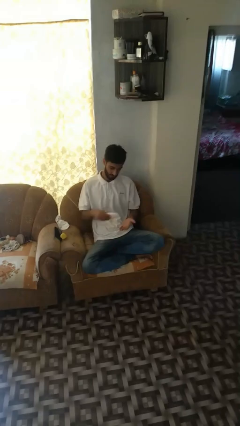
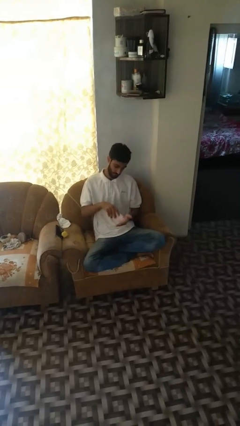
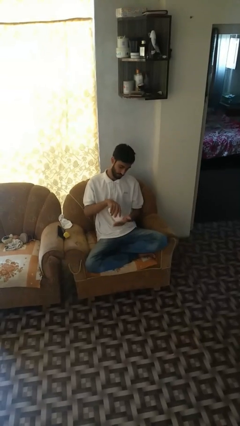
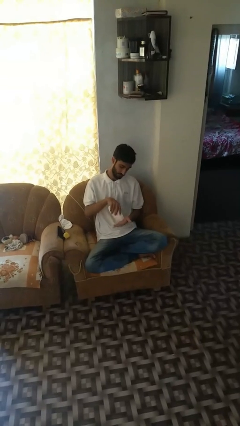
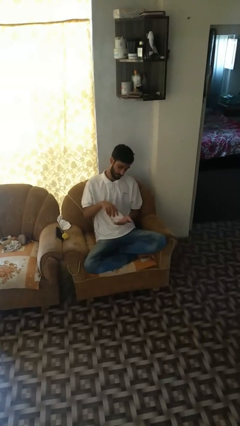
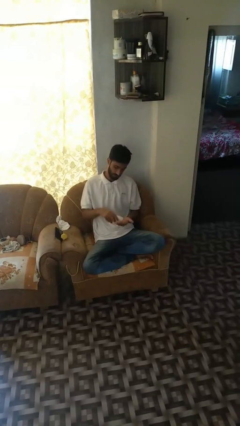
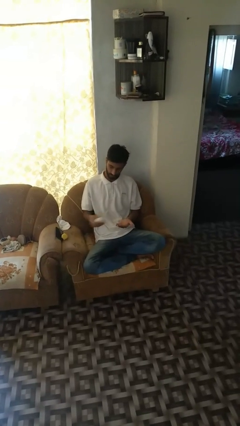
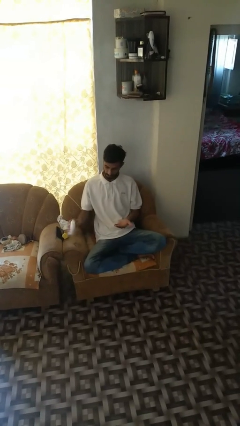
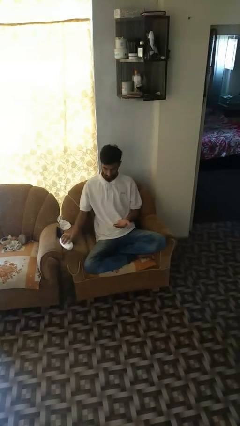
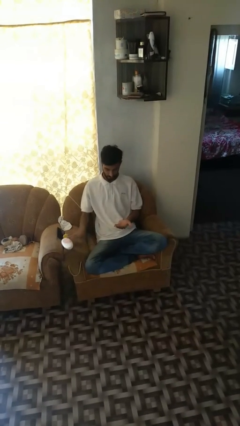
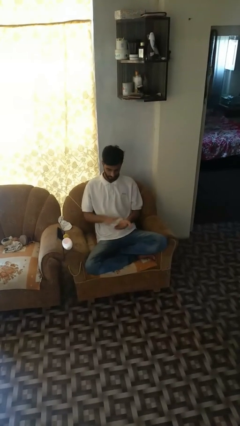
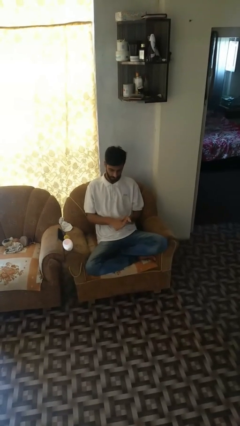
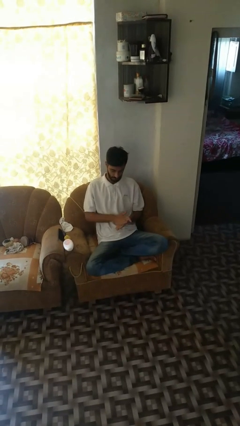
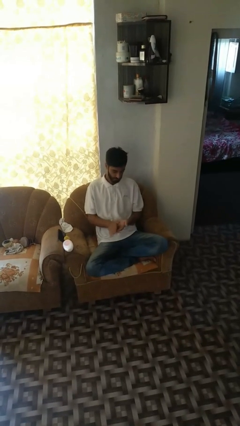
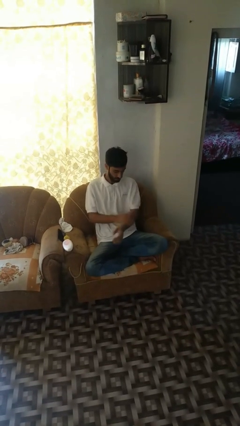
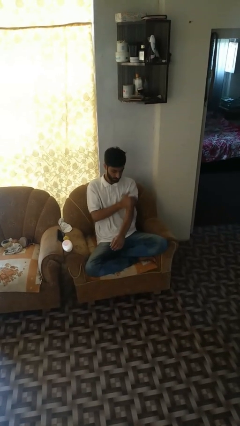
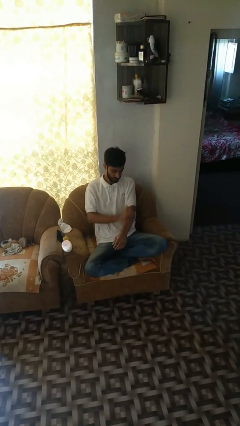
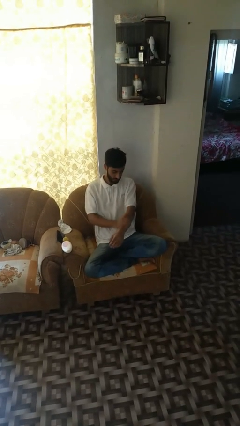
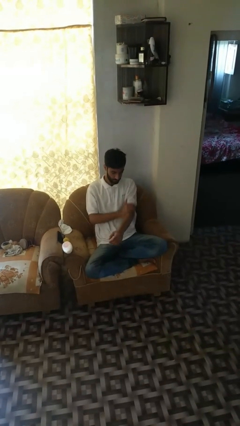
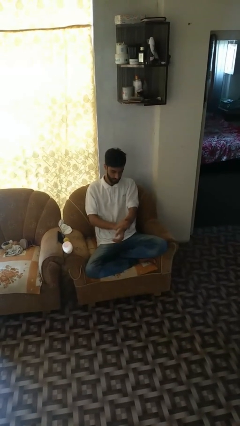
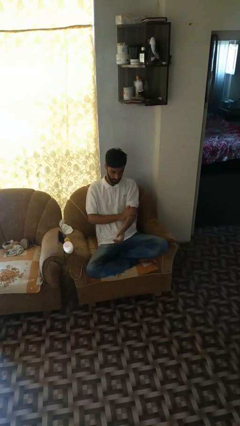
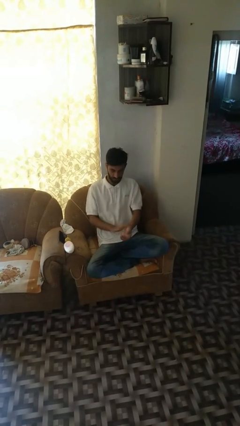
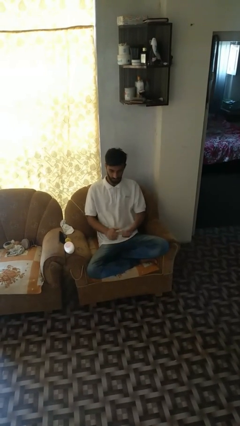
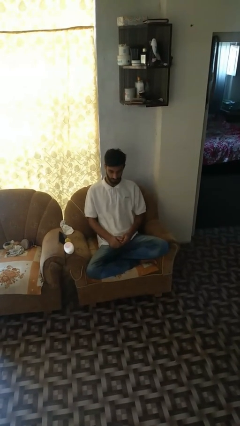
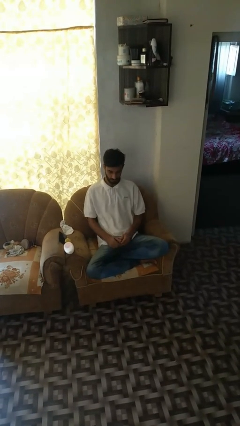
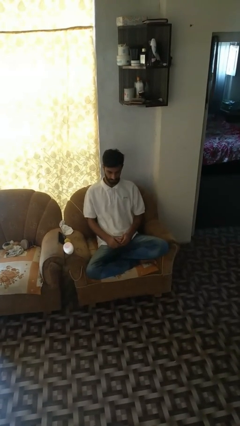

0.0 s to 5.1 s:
person applies sunscreen

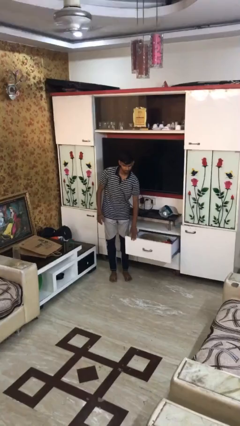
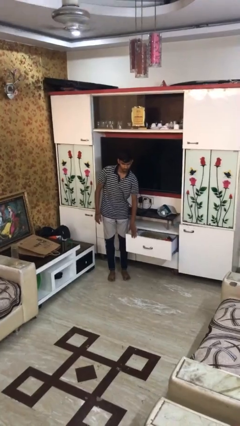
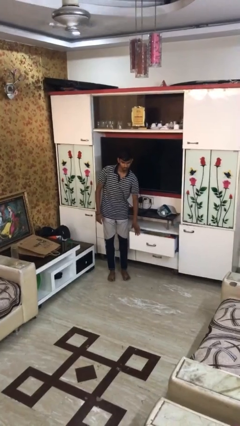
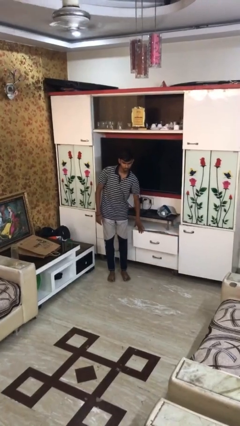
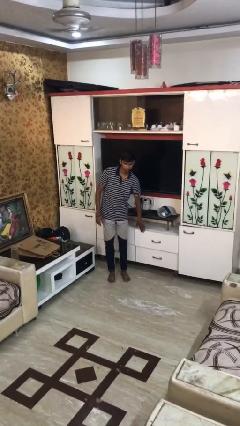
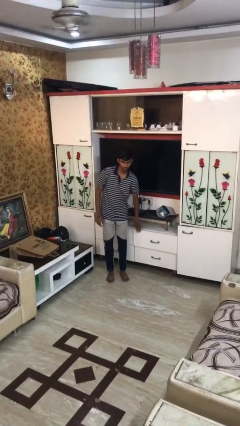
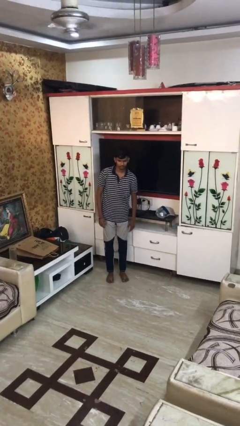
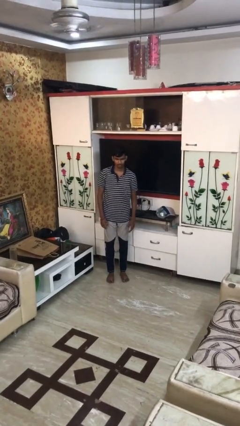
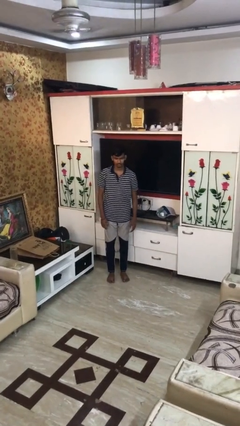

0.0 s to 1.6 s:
person closes dresser drawer

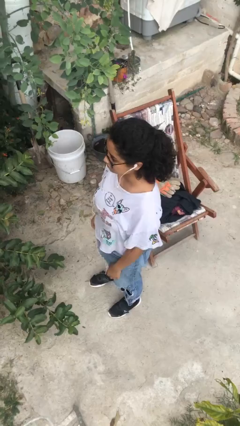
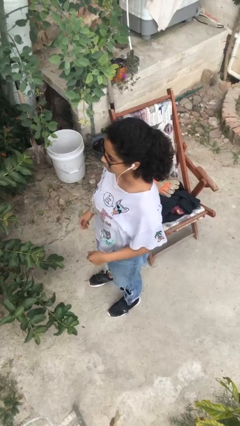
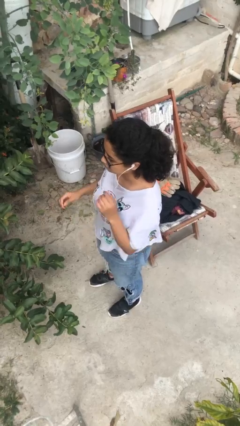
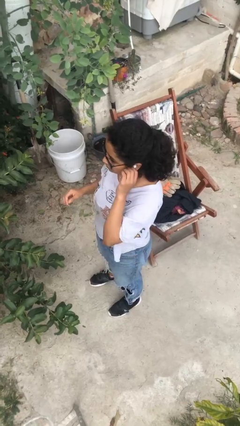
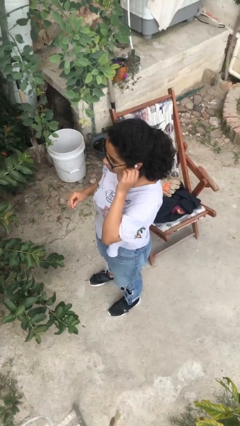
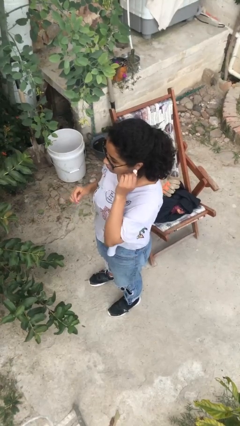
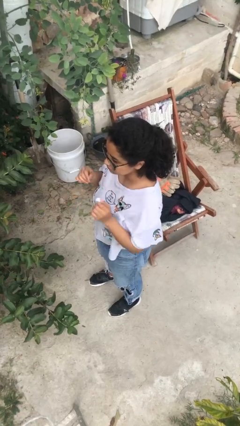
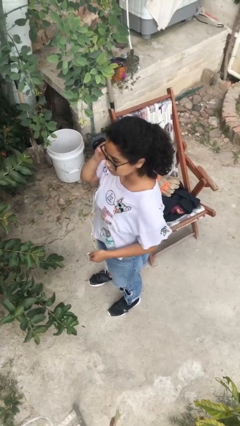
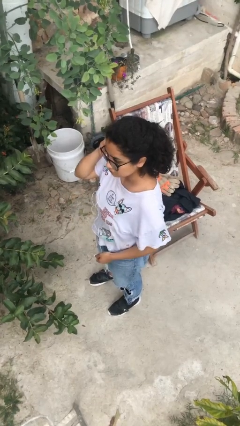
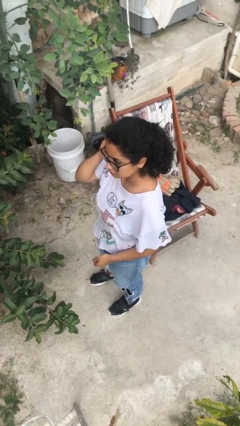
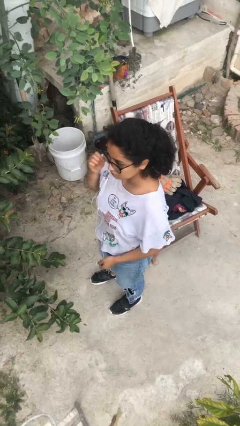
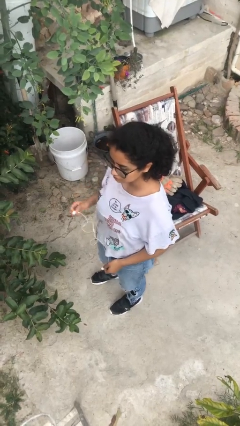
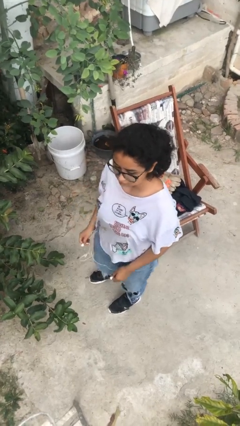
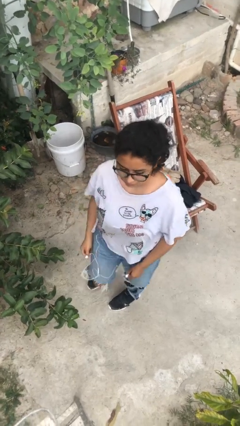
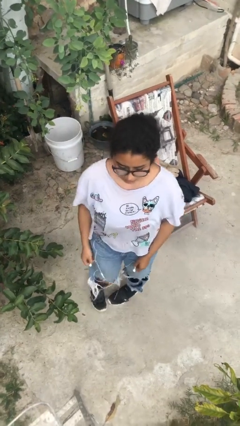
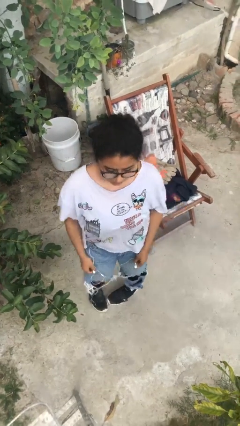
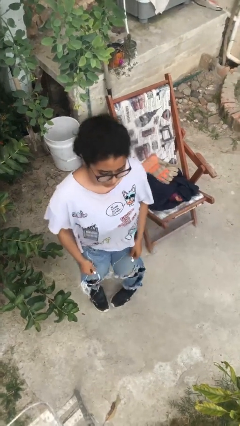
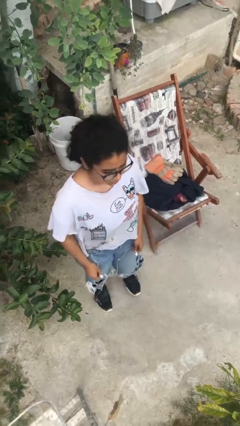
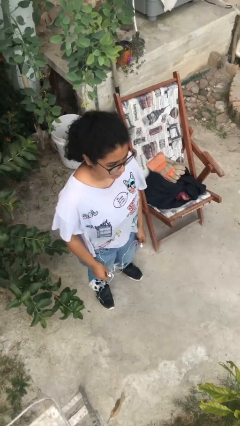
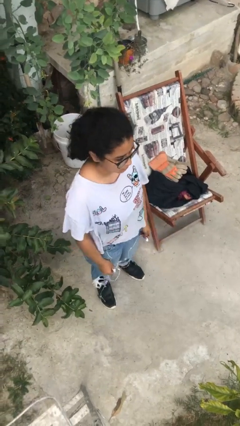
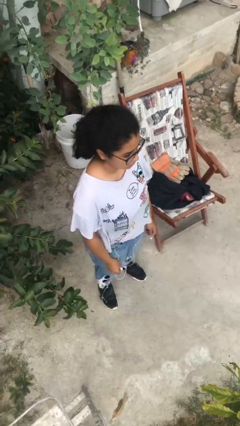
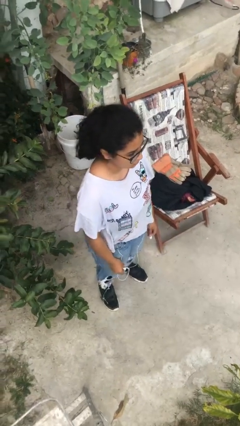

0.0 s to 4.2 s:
person takes off headphones

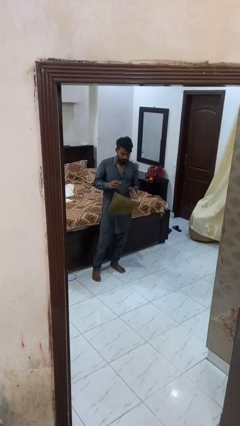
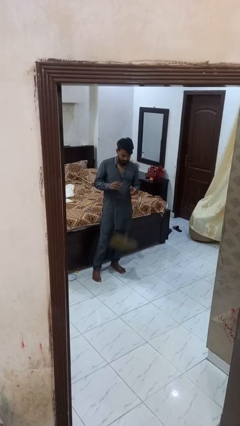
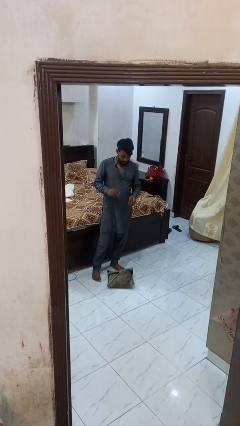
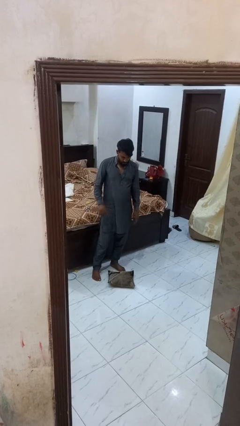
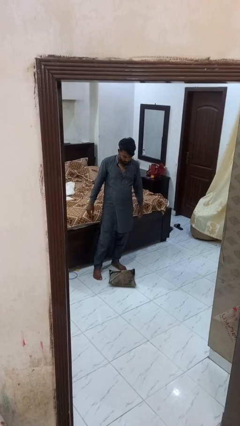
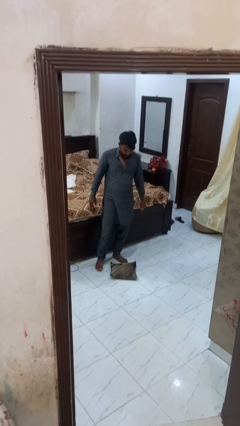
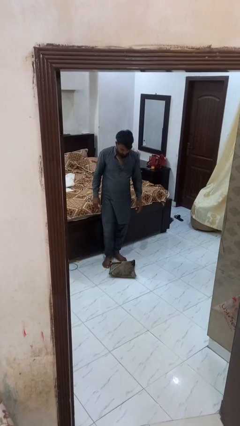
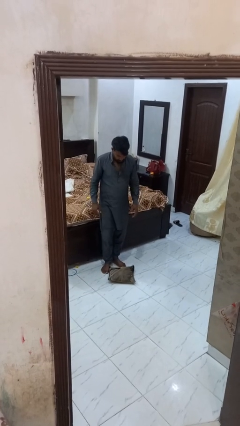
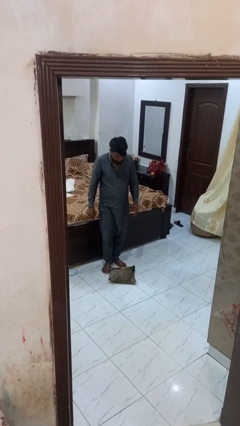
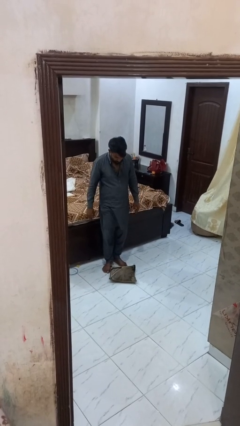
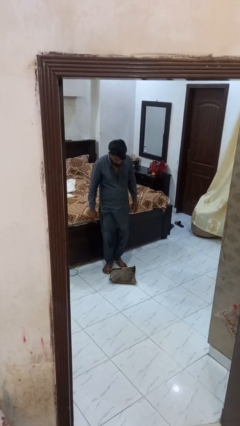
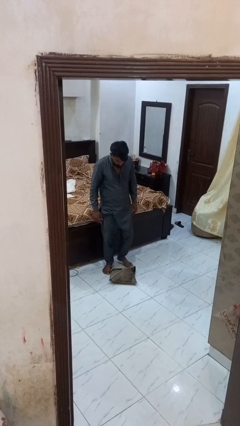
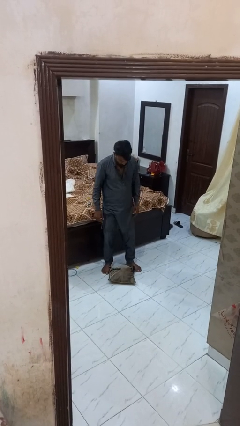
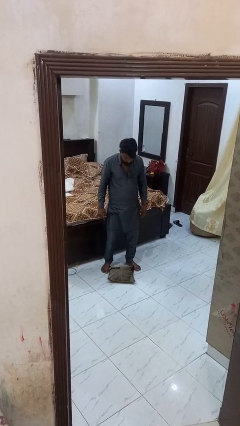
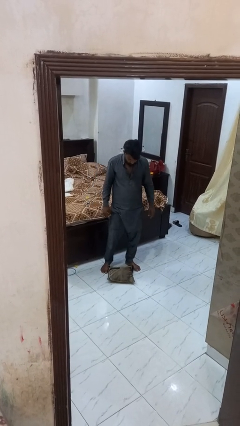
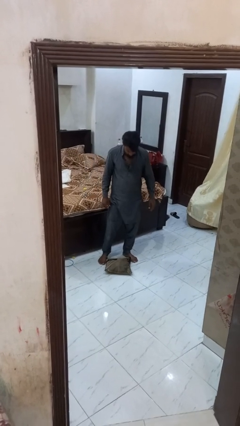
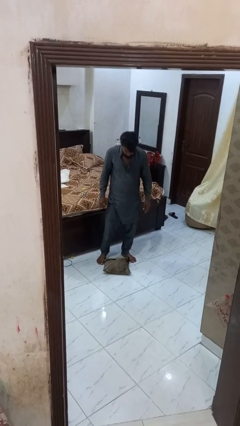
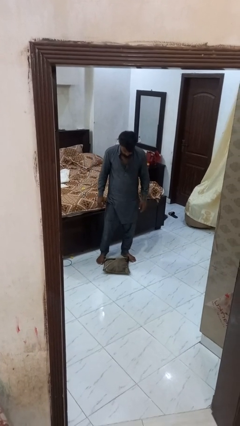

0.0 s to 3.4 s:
person drops object

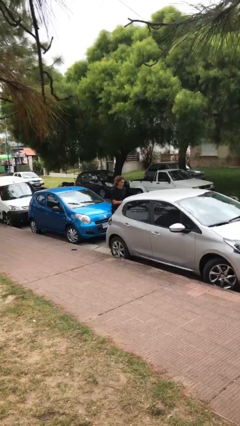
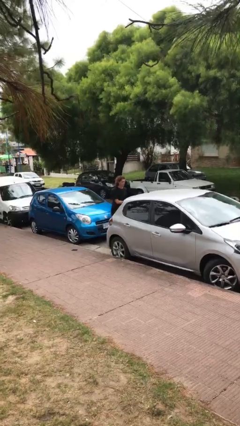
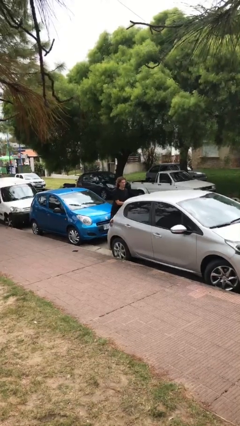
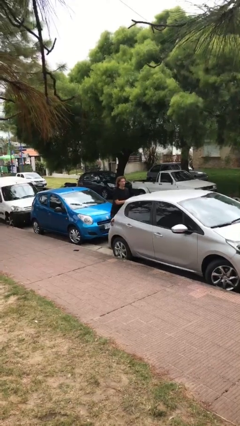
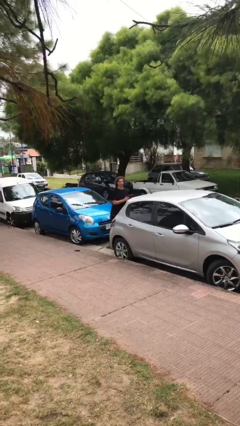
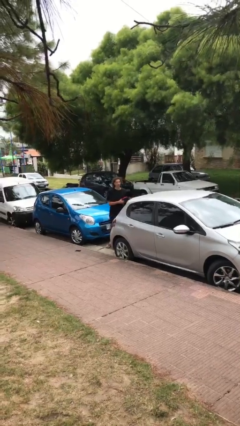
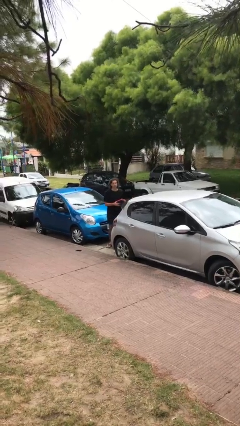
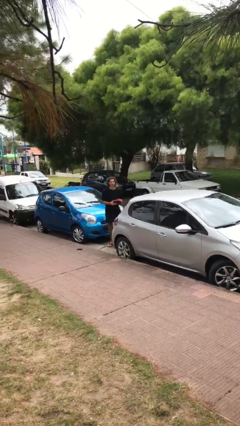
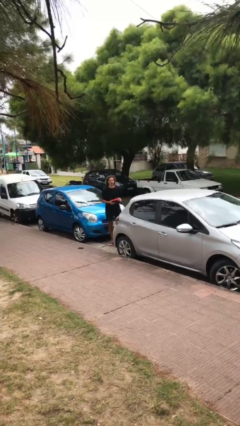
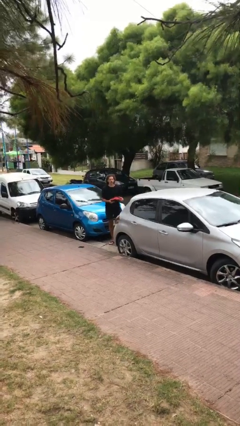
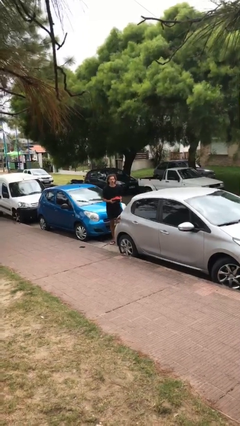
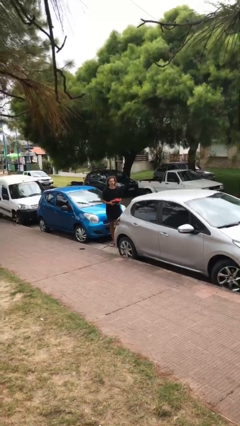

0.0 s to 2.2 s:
person unloads car

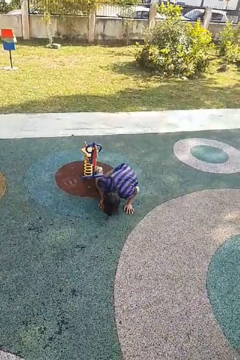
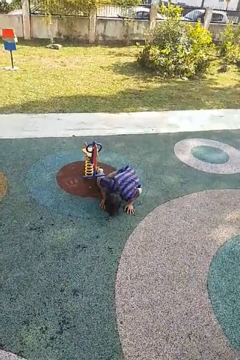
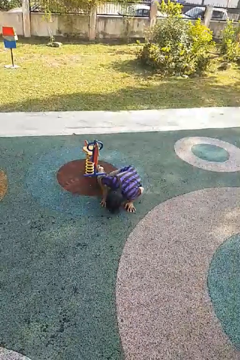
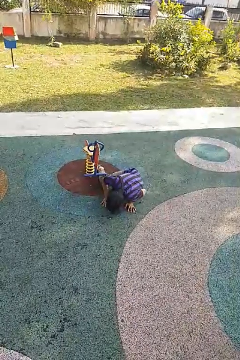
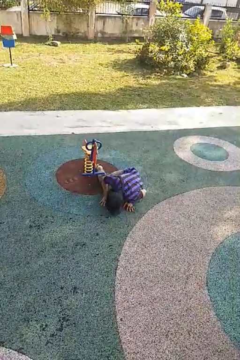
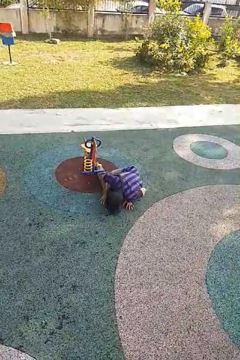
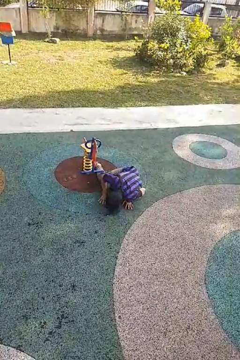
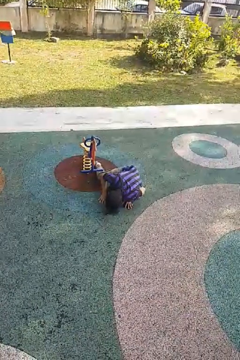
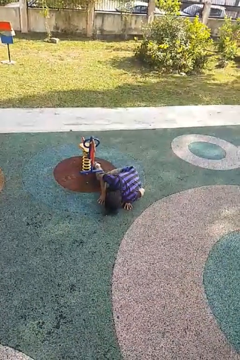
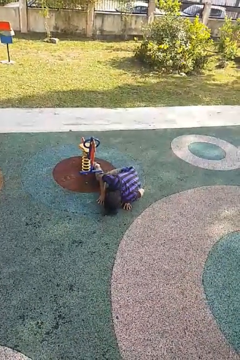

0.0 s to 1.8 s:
person lies down on floor
